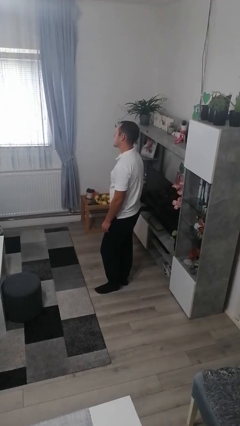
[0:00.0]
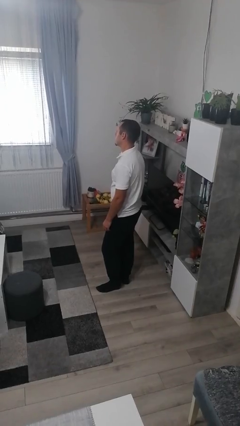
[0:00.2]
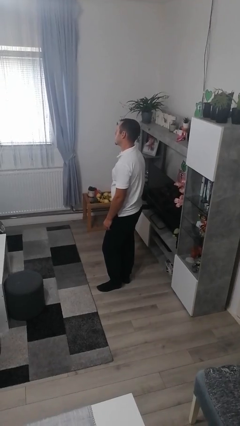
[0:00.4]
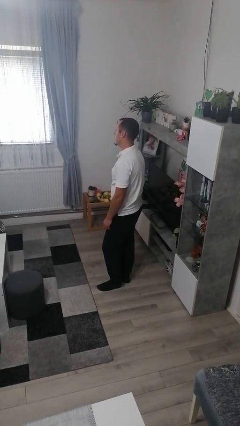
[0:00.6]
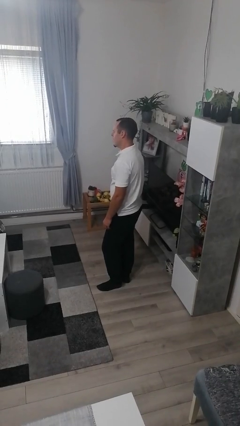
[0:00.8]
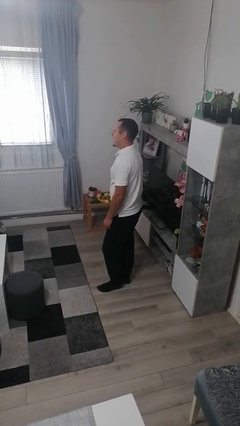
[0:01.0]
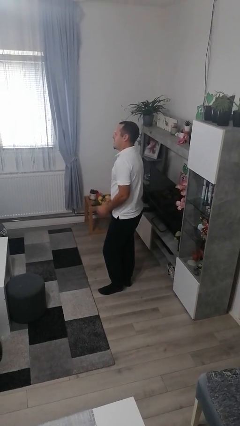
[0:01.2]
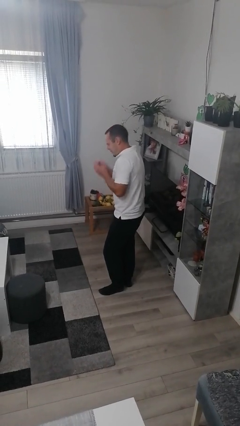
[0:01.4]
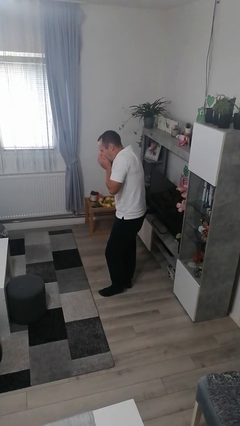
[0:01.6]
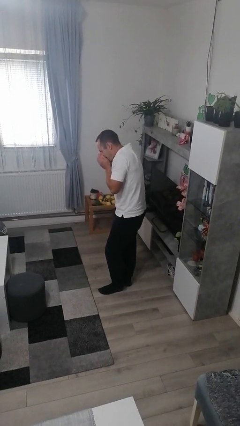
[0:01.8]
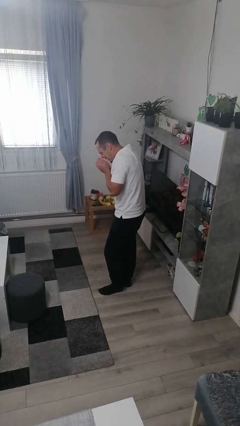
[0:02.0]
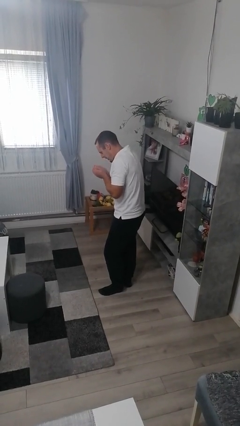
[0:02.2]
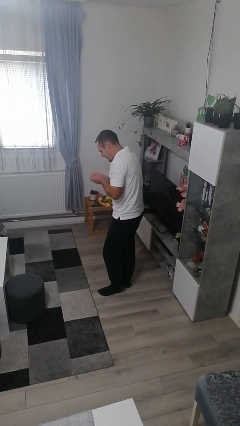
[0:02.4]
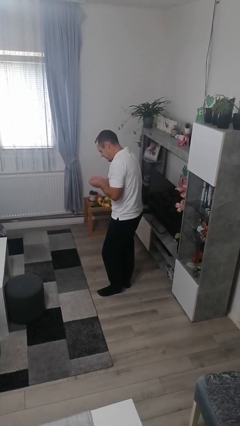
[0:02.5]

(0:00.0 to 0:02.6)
person sneezes into hand

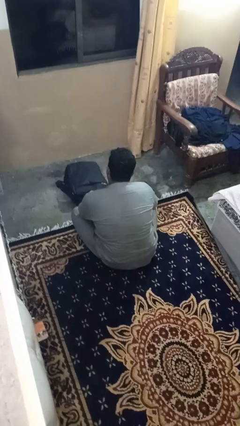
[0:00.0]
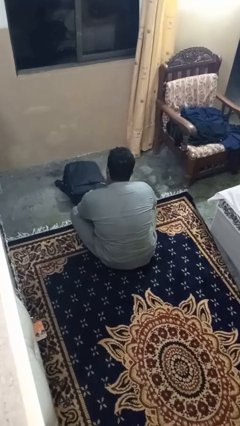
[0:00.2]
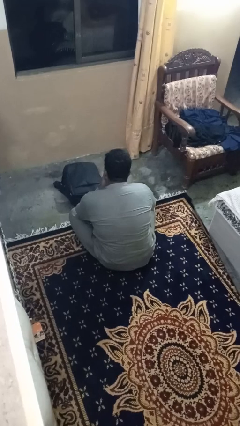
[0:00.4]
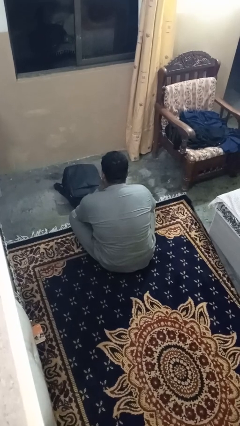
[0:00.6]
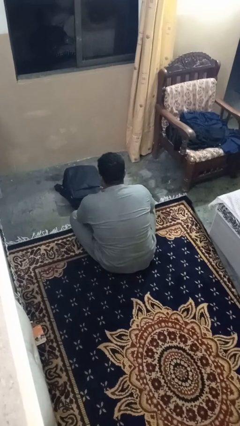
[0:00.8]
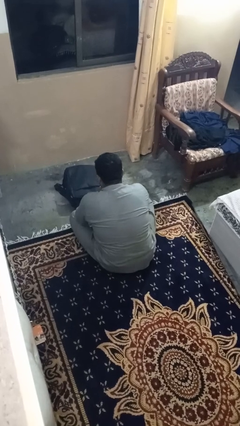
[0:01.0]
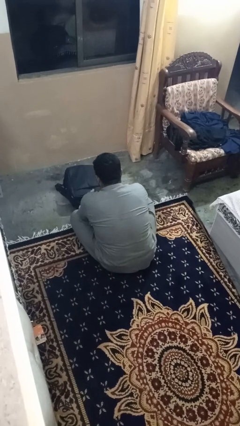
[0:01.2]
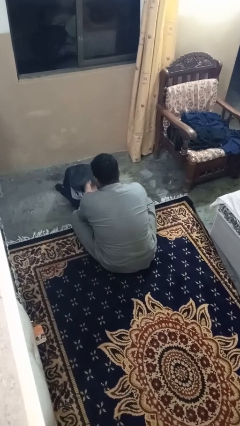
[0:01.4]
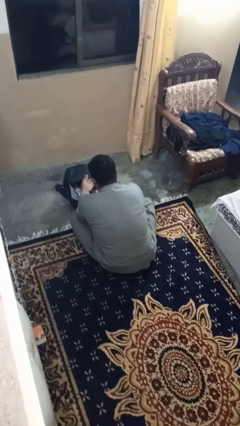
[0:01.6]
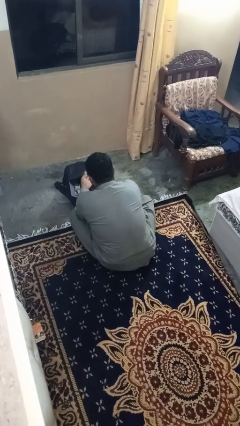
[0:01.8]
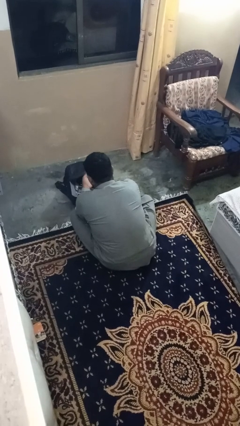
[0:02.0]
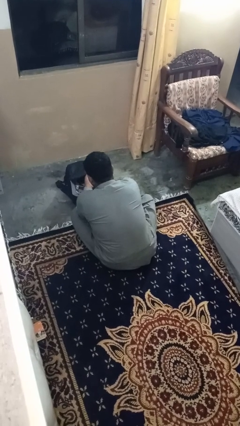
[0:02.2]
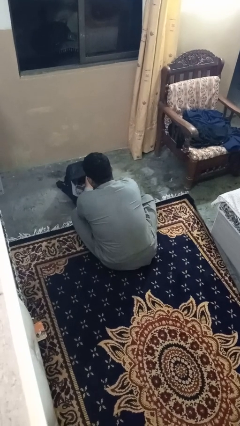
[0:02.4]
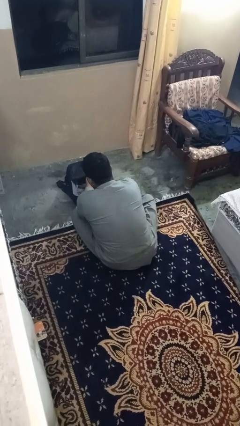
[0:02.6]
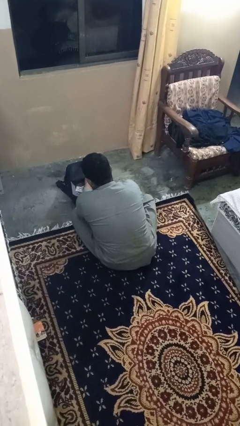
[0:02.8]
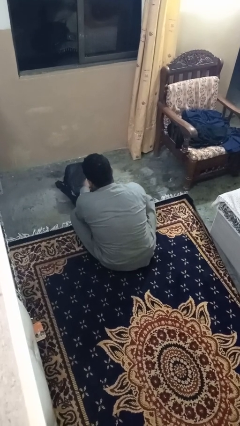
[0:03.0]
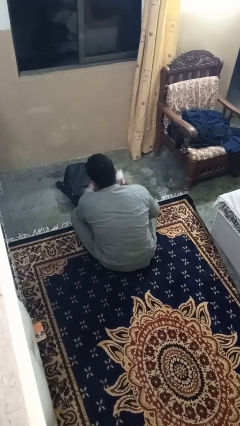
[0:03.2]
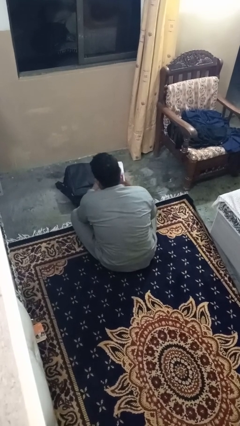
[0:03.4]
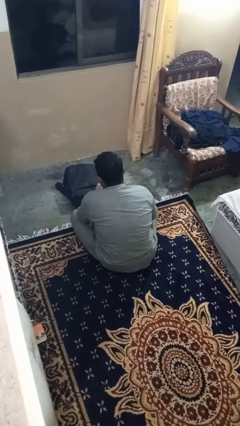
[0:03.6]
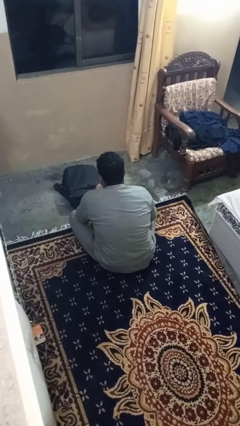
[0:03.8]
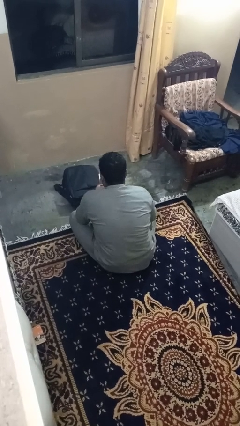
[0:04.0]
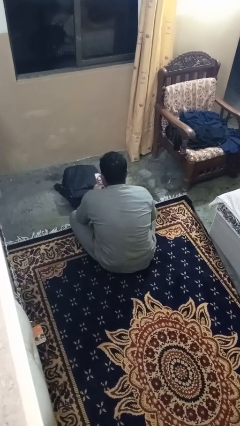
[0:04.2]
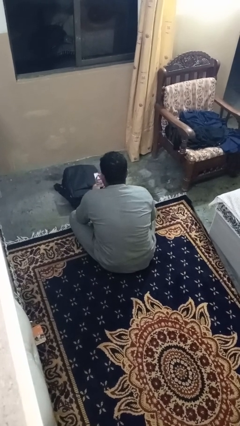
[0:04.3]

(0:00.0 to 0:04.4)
person takes object from bag

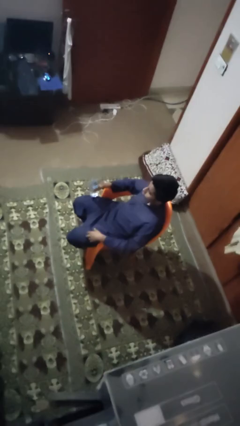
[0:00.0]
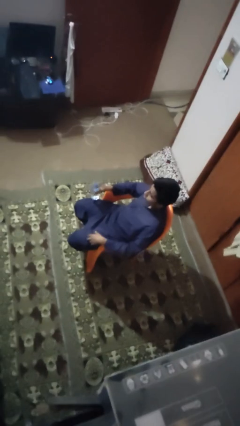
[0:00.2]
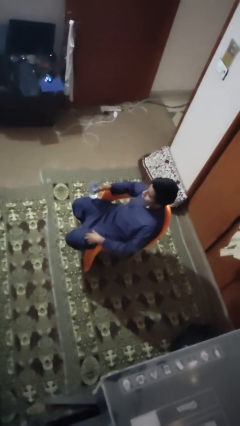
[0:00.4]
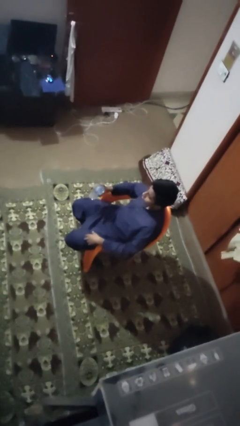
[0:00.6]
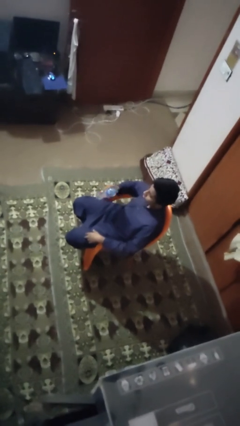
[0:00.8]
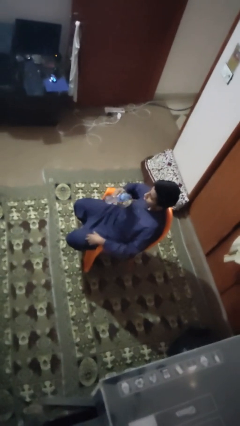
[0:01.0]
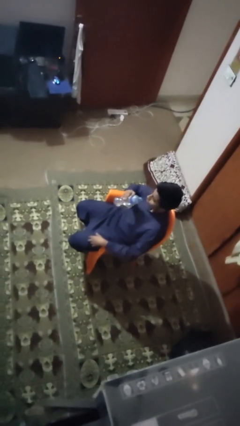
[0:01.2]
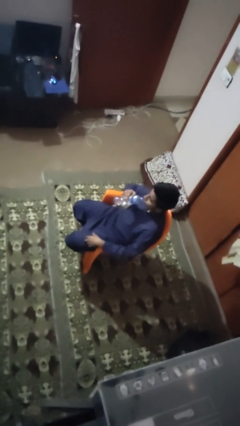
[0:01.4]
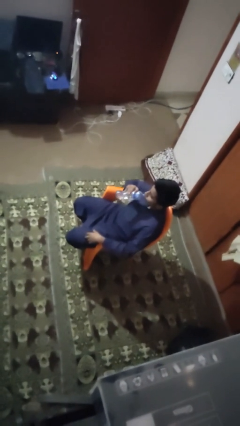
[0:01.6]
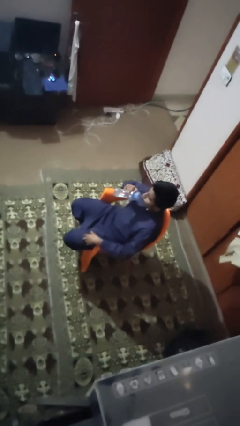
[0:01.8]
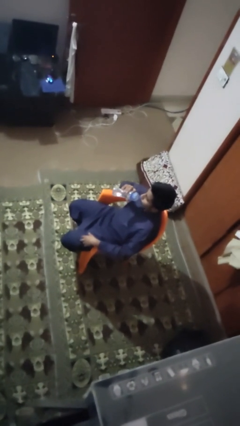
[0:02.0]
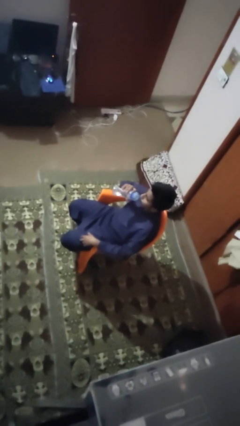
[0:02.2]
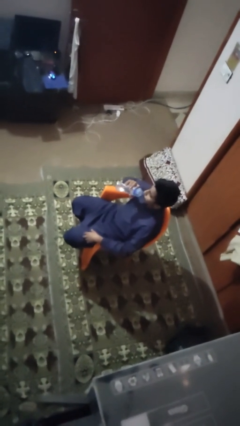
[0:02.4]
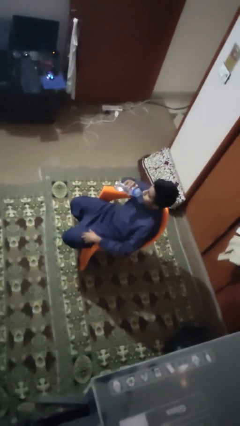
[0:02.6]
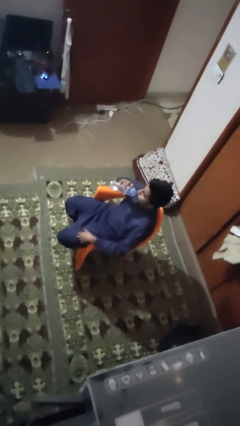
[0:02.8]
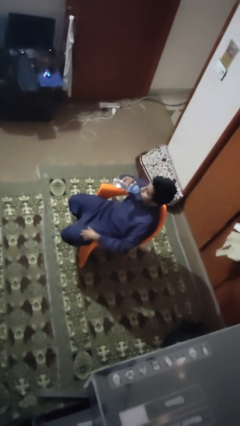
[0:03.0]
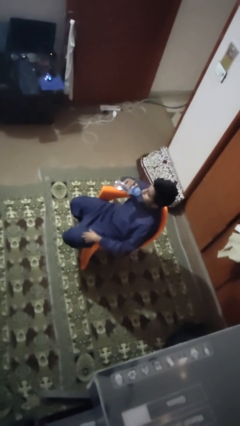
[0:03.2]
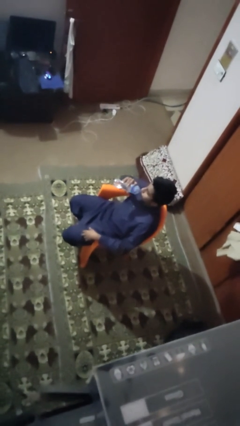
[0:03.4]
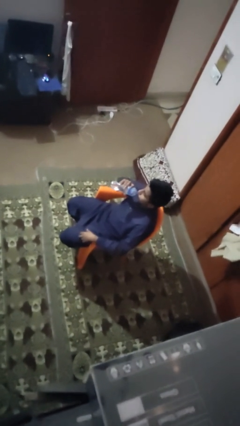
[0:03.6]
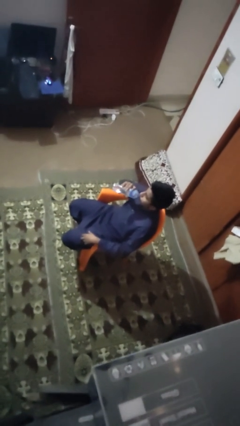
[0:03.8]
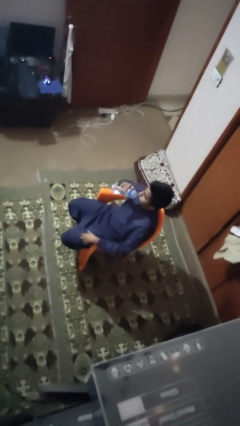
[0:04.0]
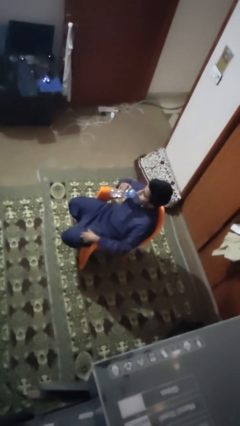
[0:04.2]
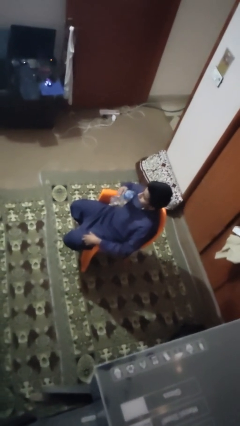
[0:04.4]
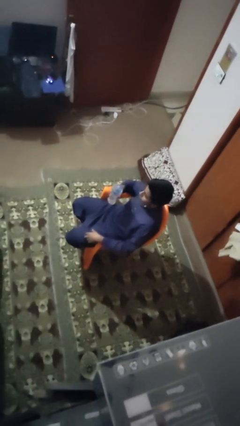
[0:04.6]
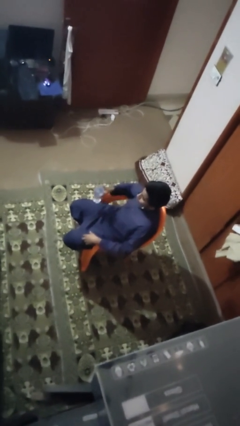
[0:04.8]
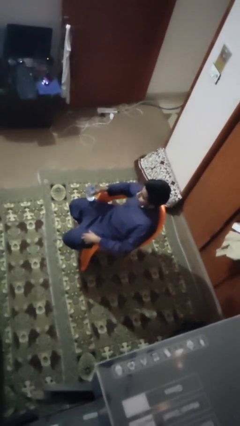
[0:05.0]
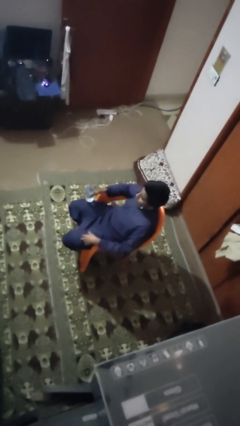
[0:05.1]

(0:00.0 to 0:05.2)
person drinks from bottle

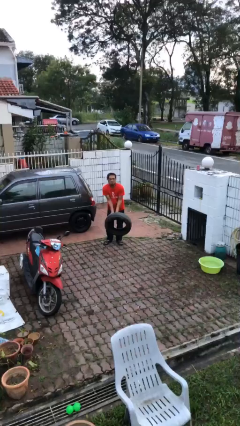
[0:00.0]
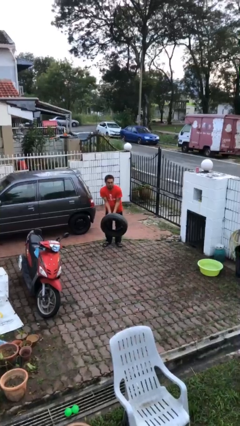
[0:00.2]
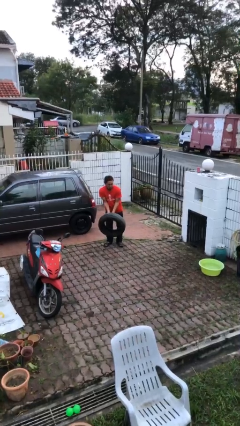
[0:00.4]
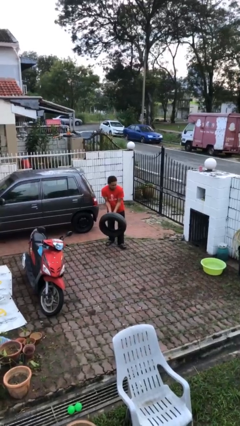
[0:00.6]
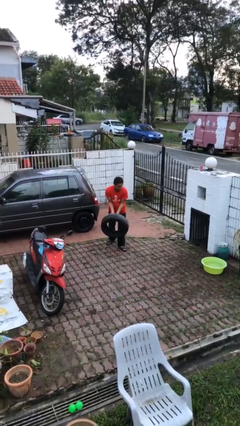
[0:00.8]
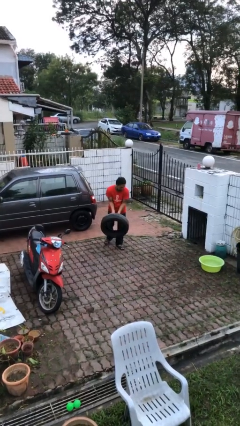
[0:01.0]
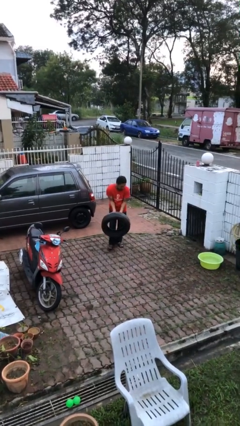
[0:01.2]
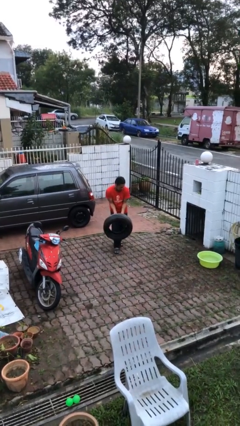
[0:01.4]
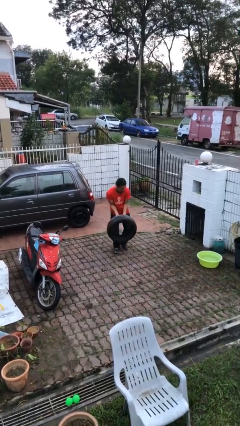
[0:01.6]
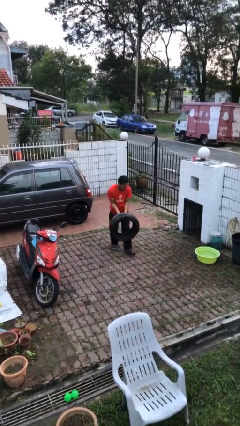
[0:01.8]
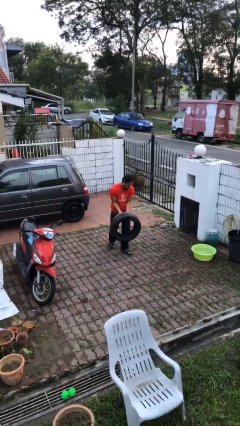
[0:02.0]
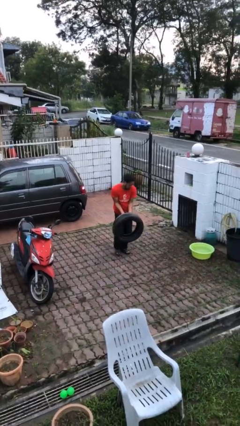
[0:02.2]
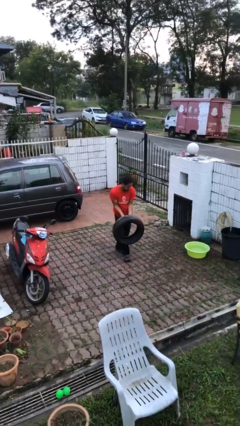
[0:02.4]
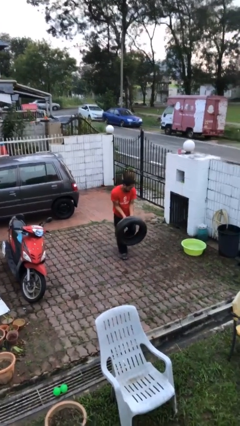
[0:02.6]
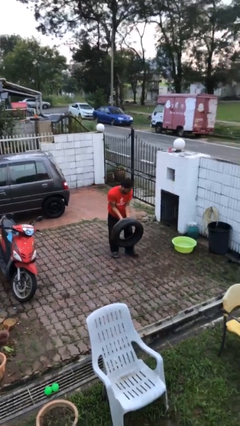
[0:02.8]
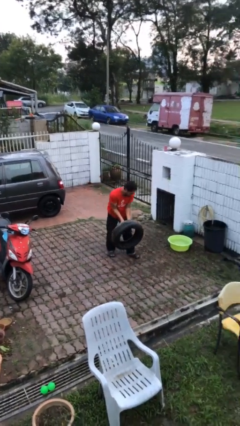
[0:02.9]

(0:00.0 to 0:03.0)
person carries heavy object

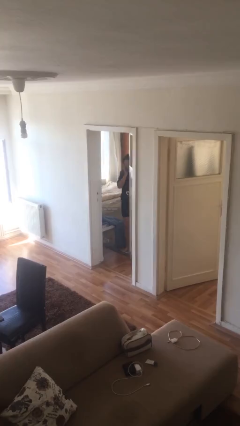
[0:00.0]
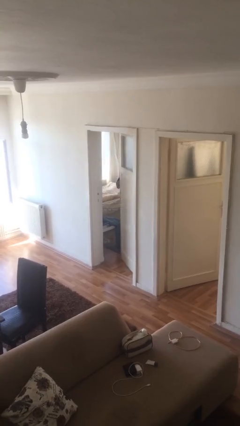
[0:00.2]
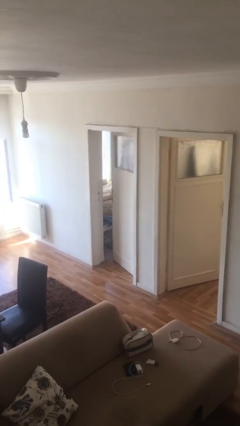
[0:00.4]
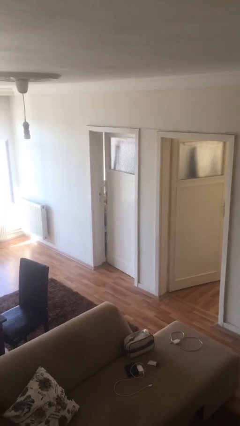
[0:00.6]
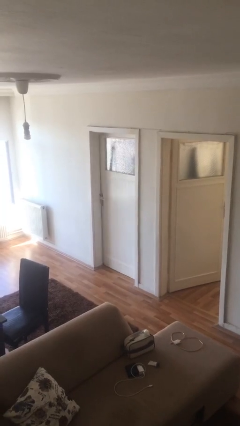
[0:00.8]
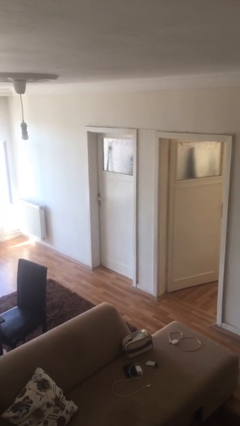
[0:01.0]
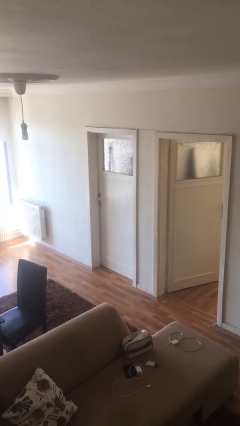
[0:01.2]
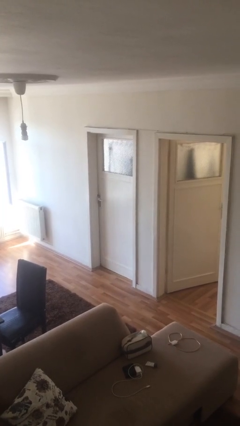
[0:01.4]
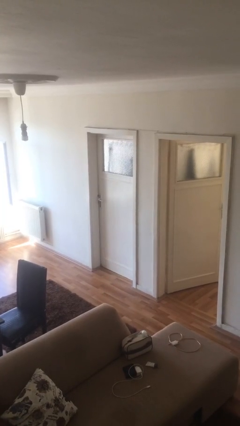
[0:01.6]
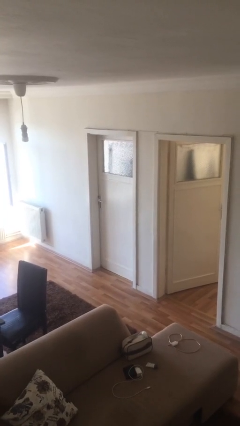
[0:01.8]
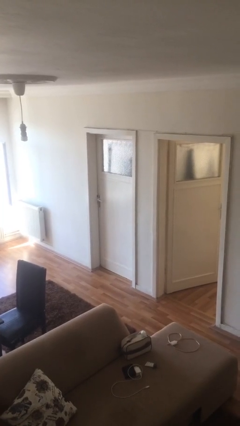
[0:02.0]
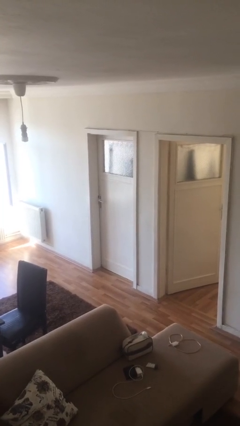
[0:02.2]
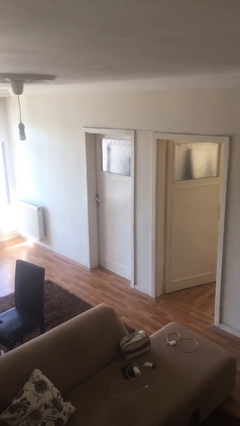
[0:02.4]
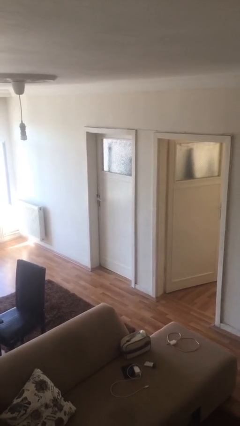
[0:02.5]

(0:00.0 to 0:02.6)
person closes facility door
